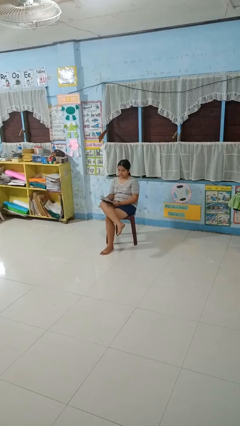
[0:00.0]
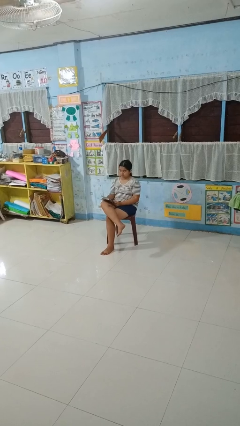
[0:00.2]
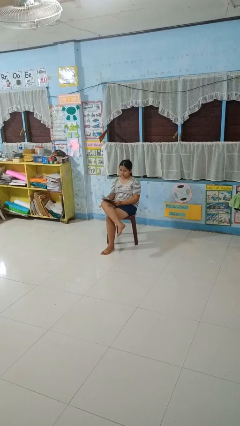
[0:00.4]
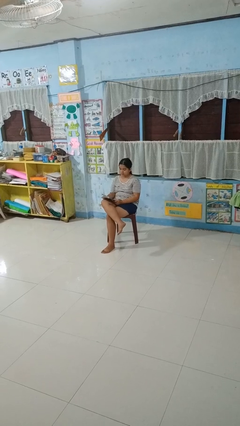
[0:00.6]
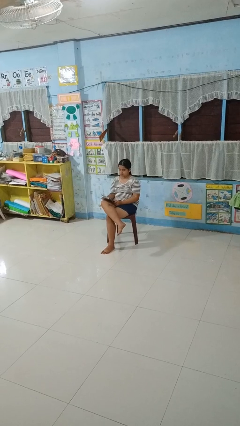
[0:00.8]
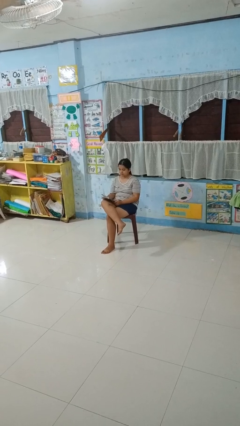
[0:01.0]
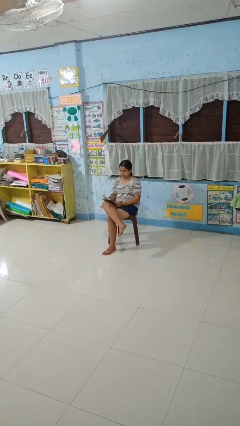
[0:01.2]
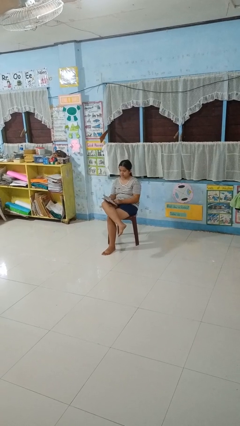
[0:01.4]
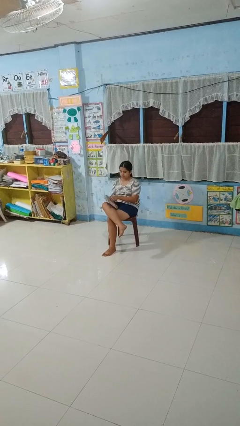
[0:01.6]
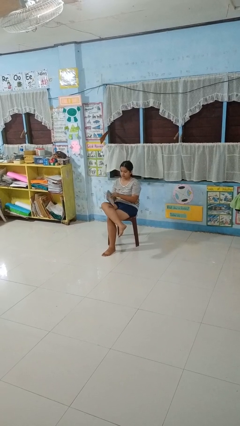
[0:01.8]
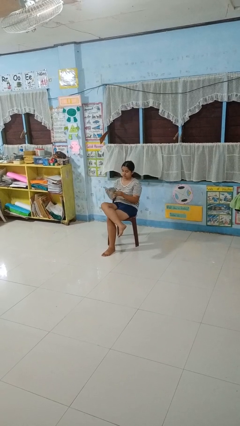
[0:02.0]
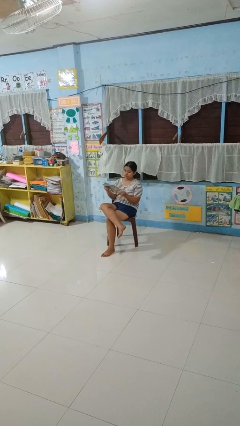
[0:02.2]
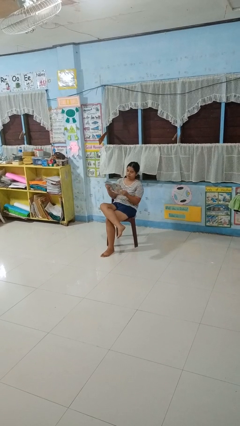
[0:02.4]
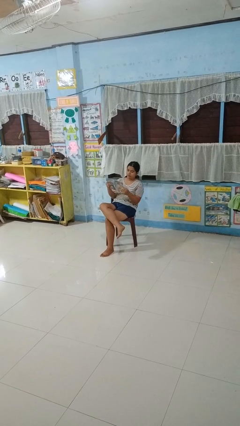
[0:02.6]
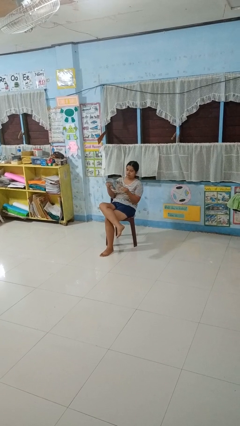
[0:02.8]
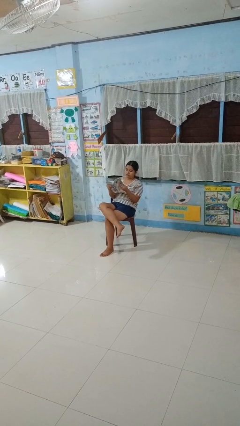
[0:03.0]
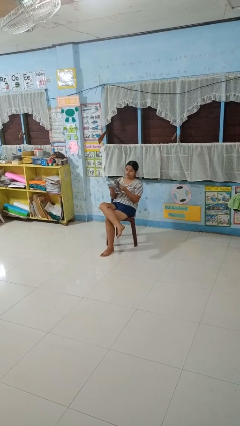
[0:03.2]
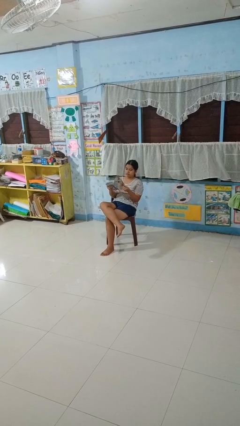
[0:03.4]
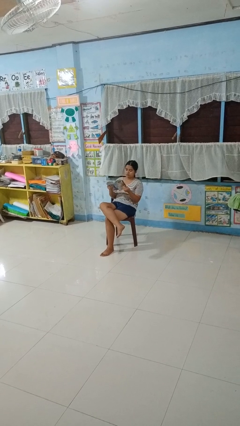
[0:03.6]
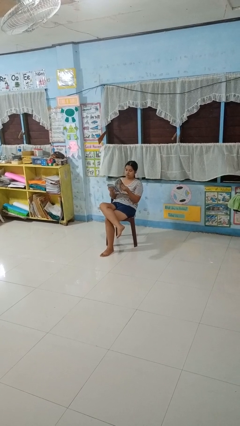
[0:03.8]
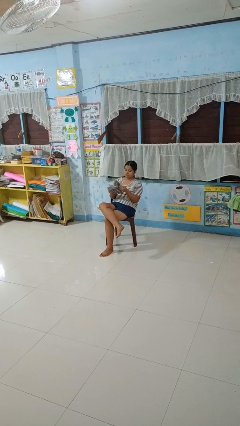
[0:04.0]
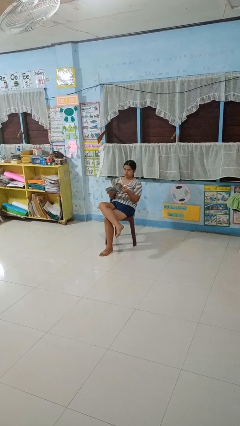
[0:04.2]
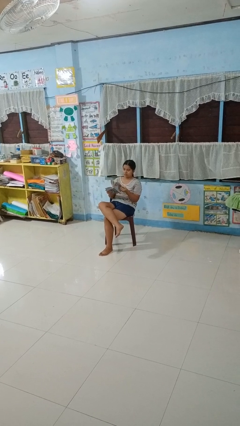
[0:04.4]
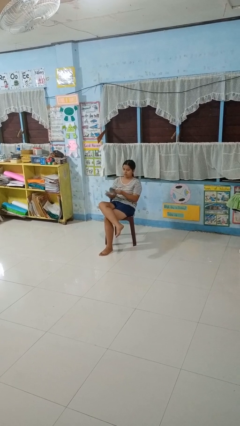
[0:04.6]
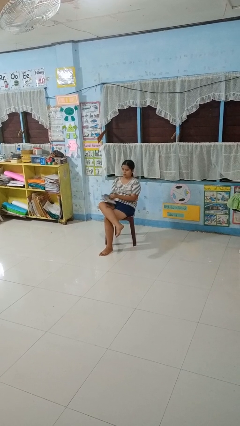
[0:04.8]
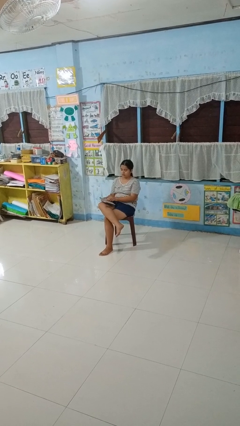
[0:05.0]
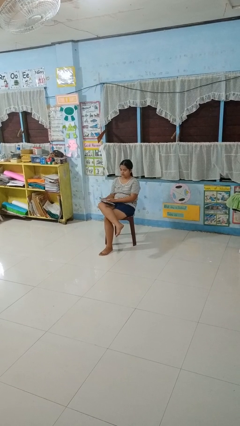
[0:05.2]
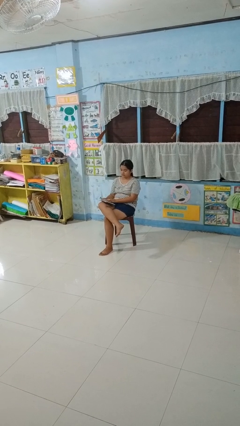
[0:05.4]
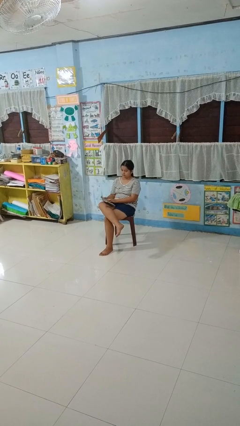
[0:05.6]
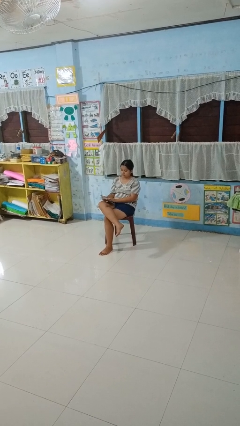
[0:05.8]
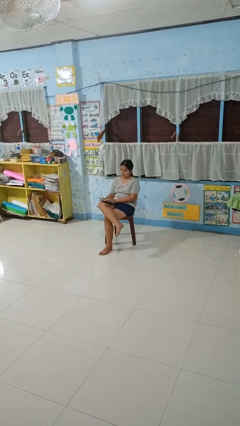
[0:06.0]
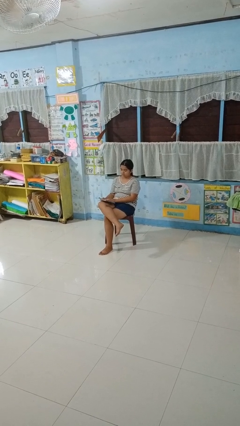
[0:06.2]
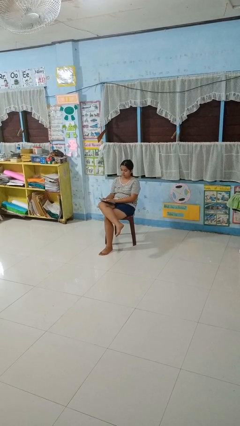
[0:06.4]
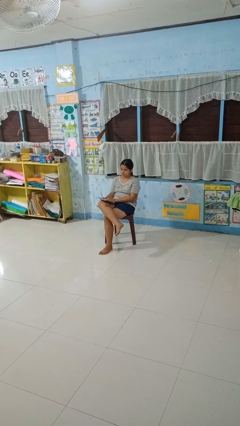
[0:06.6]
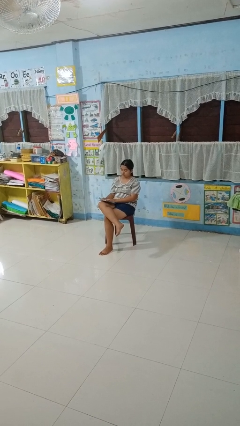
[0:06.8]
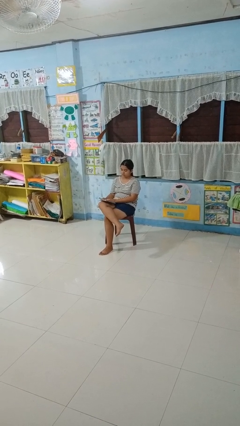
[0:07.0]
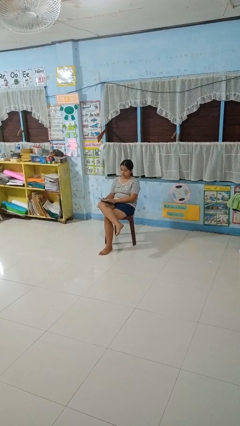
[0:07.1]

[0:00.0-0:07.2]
person reads magazine

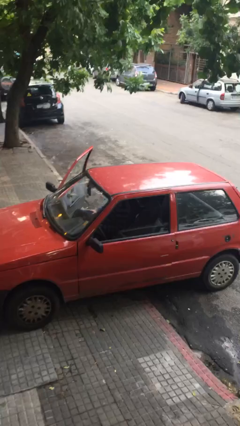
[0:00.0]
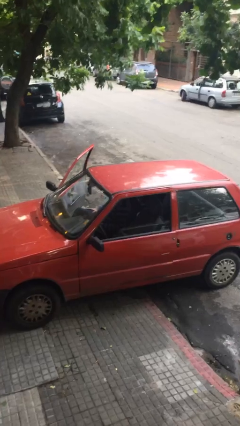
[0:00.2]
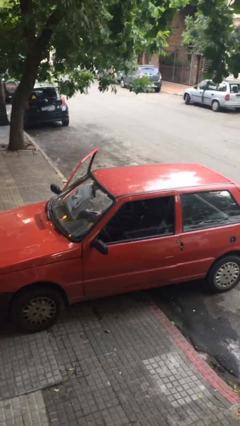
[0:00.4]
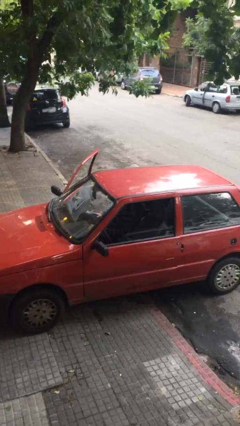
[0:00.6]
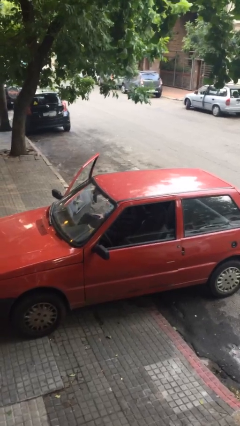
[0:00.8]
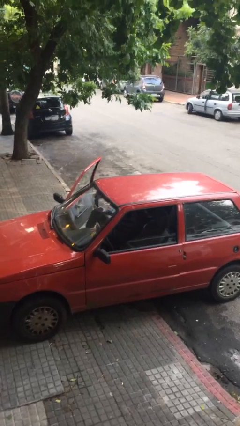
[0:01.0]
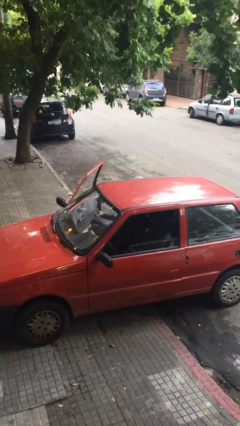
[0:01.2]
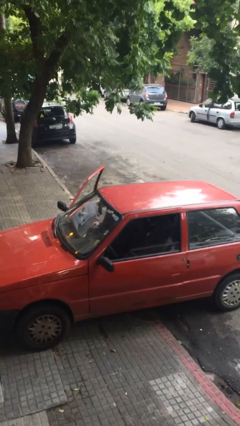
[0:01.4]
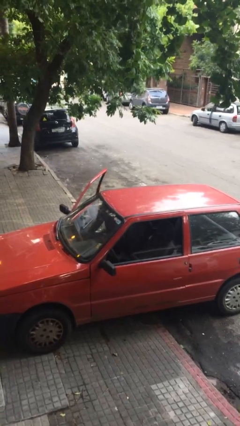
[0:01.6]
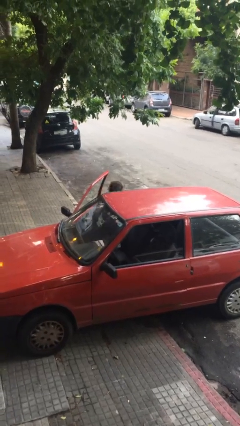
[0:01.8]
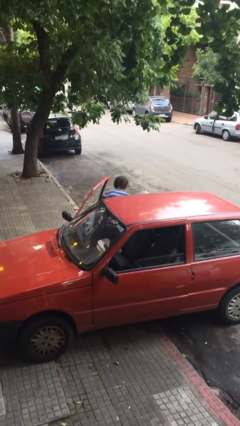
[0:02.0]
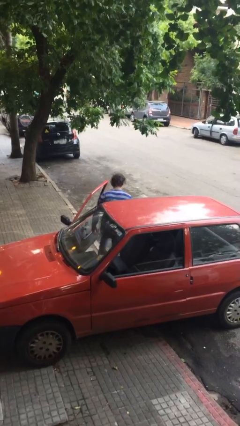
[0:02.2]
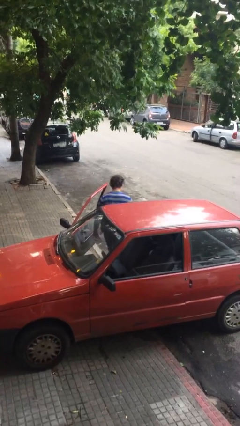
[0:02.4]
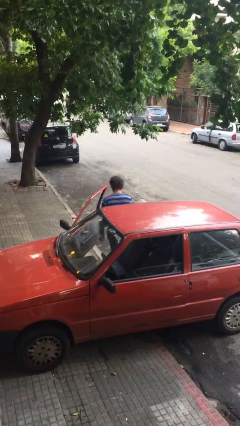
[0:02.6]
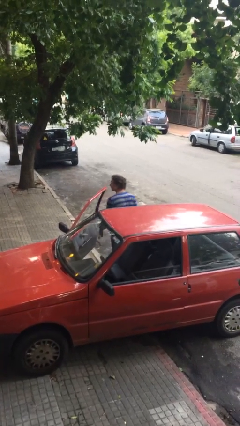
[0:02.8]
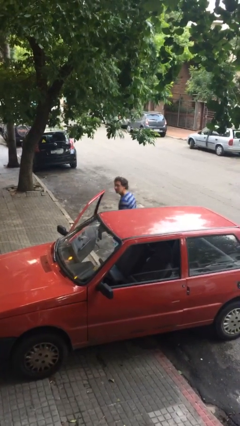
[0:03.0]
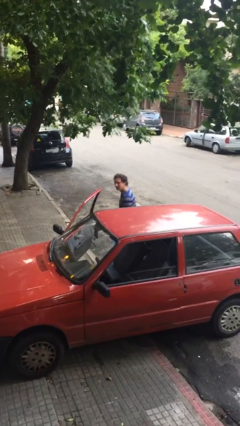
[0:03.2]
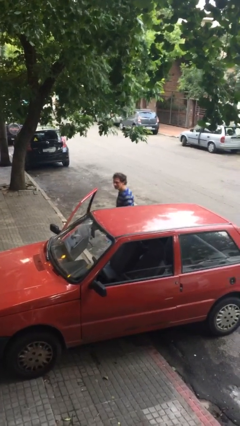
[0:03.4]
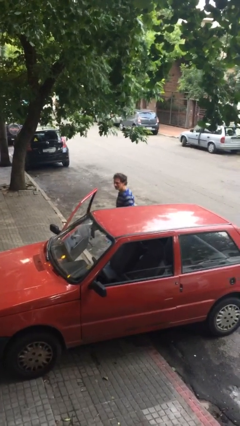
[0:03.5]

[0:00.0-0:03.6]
person exits car

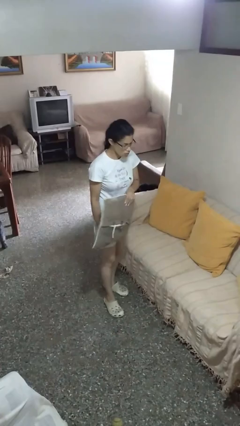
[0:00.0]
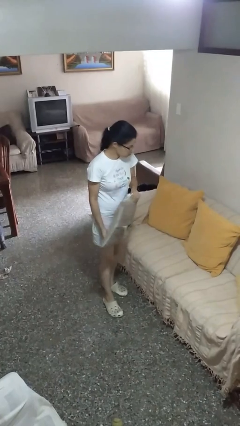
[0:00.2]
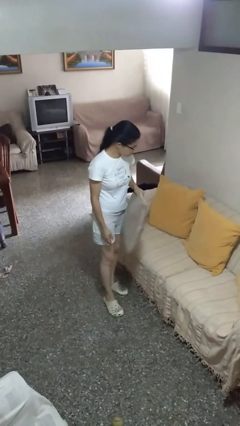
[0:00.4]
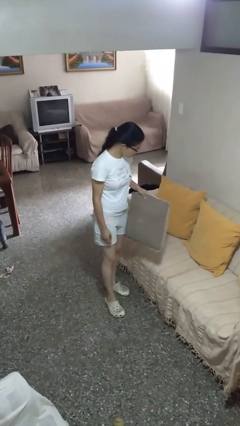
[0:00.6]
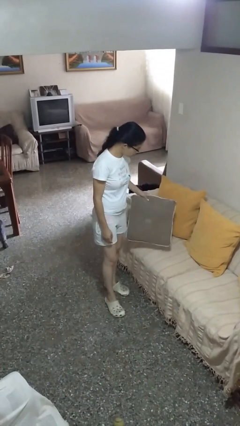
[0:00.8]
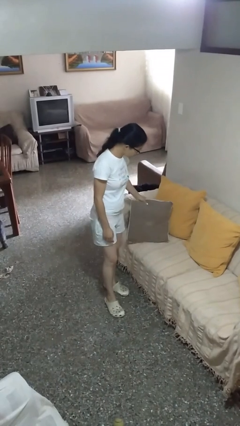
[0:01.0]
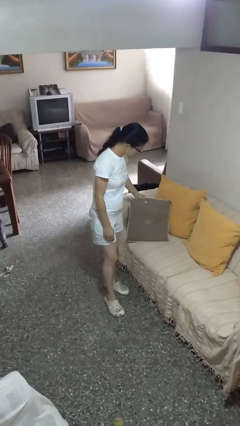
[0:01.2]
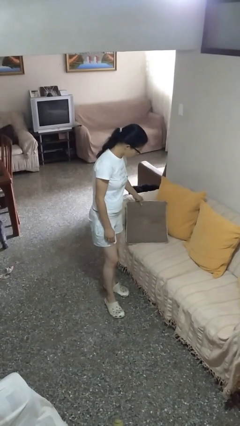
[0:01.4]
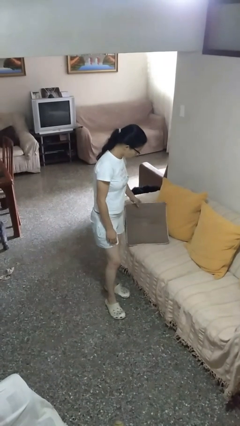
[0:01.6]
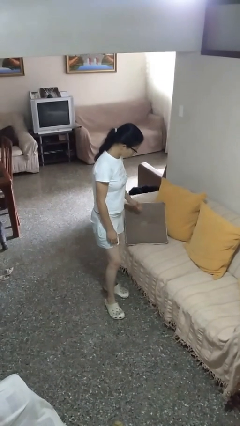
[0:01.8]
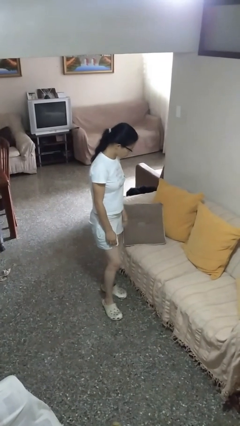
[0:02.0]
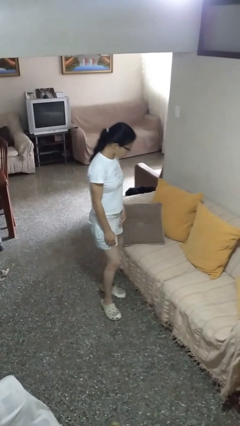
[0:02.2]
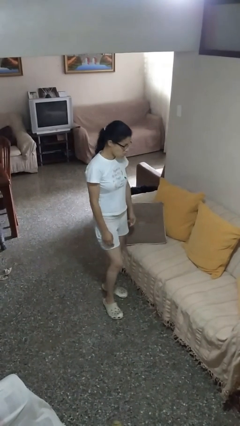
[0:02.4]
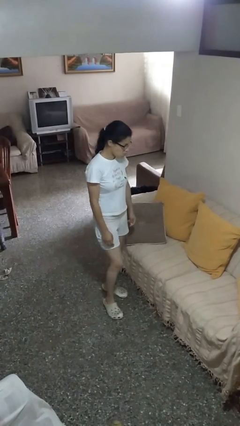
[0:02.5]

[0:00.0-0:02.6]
person puts down object on couch

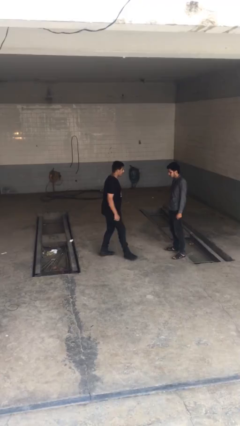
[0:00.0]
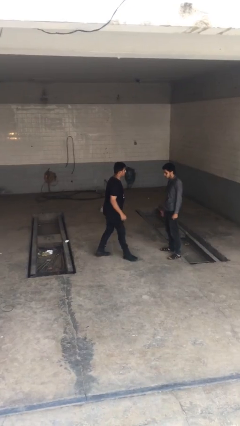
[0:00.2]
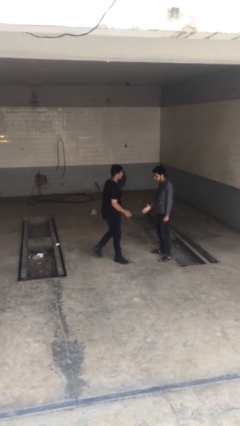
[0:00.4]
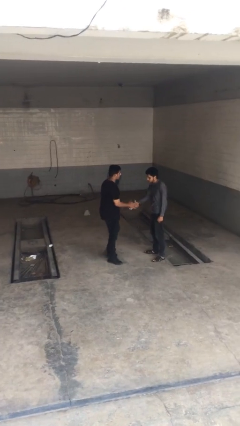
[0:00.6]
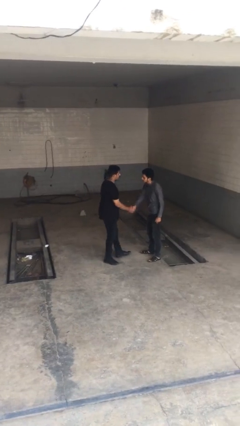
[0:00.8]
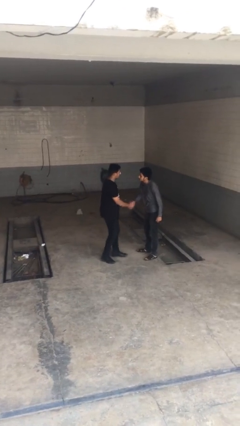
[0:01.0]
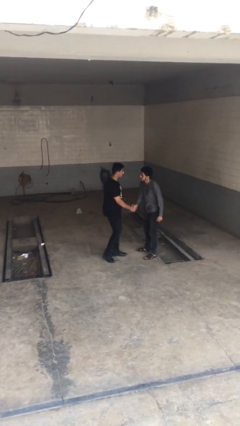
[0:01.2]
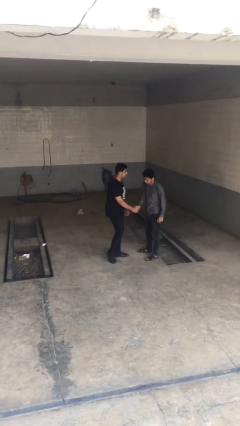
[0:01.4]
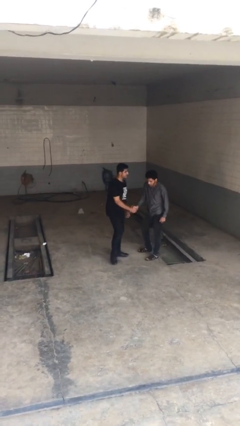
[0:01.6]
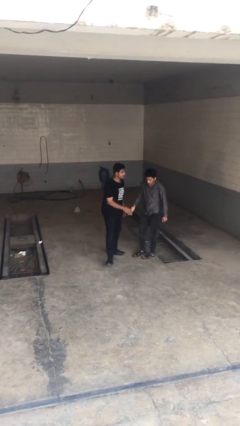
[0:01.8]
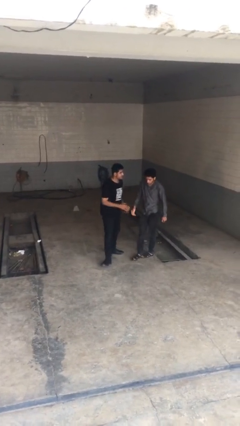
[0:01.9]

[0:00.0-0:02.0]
person shakes hand

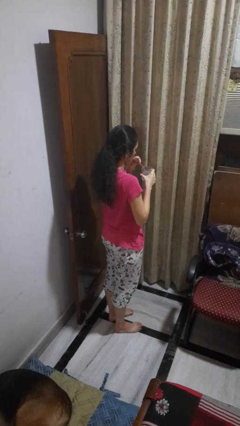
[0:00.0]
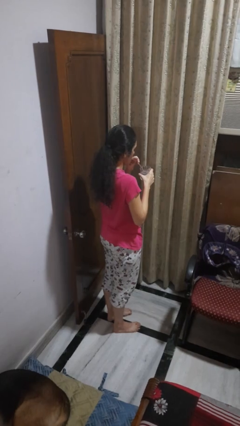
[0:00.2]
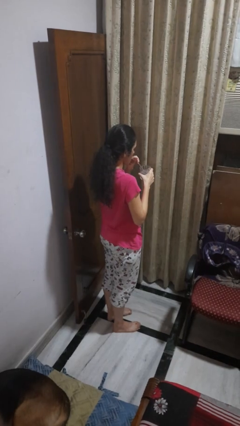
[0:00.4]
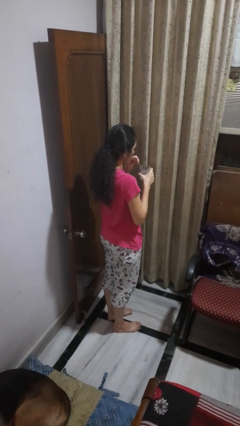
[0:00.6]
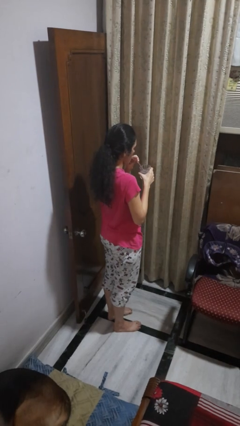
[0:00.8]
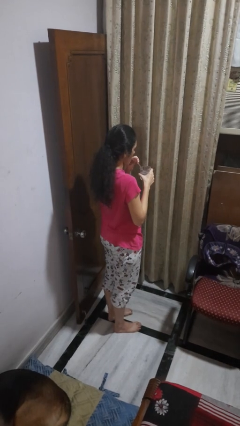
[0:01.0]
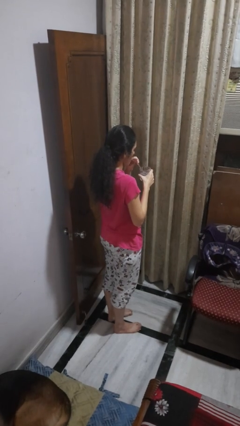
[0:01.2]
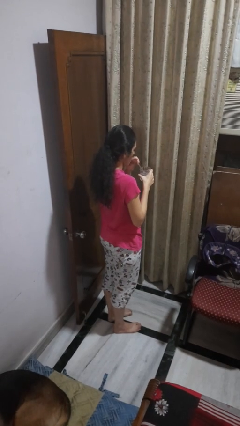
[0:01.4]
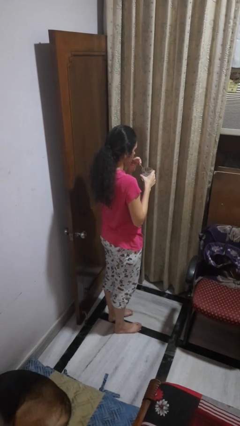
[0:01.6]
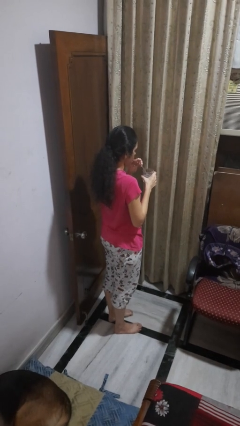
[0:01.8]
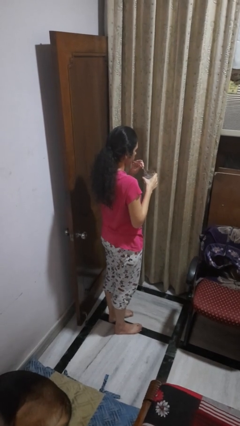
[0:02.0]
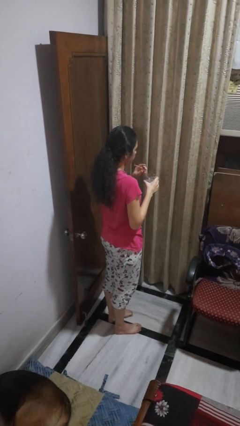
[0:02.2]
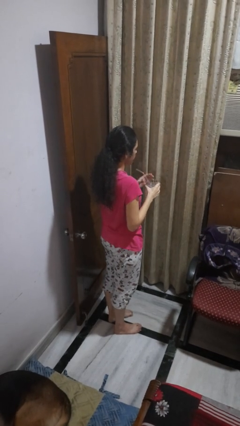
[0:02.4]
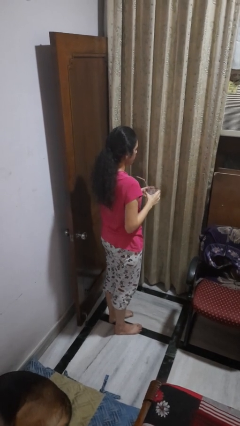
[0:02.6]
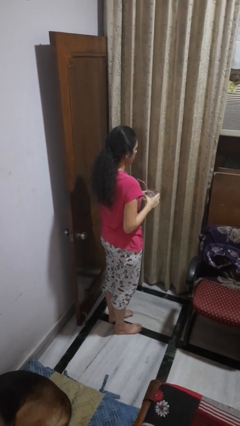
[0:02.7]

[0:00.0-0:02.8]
person drinks from straw
